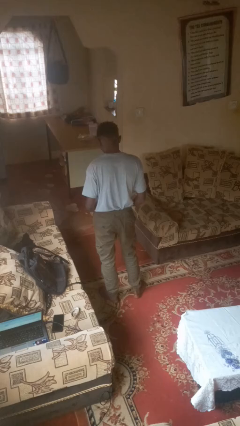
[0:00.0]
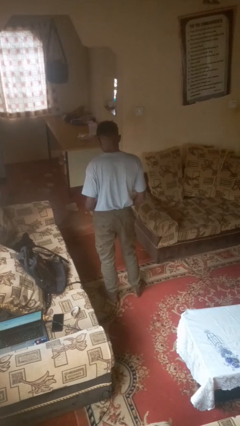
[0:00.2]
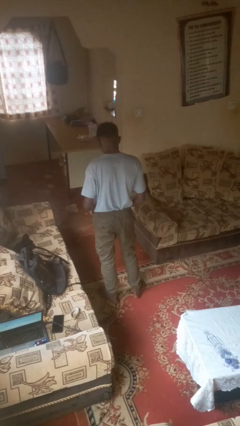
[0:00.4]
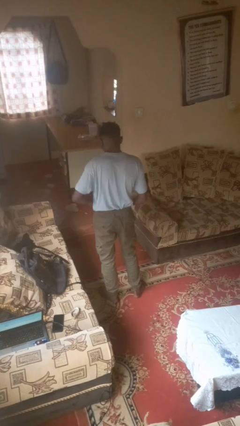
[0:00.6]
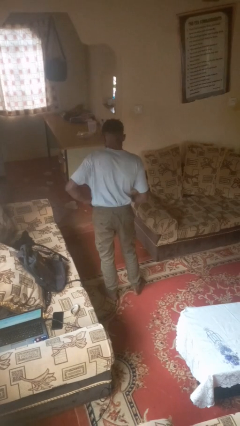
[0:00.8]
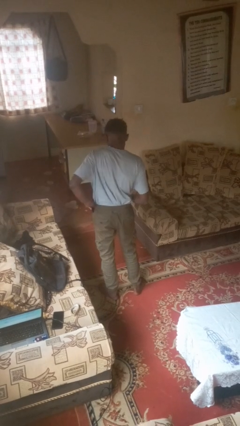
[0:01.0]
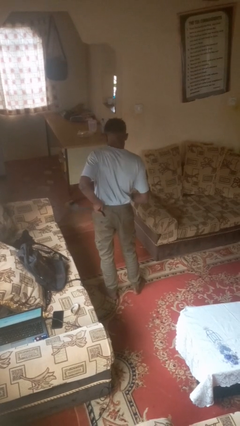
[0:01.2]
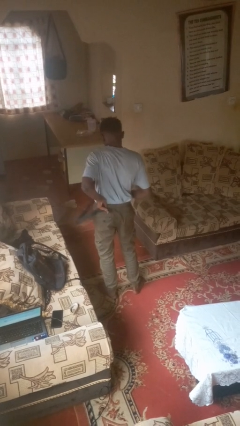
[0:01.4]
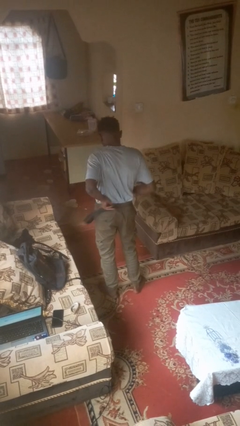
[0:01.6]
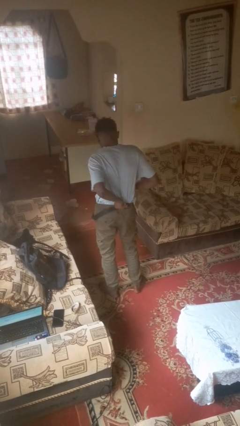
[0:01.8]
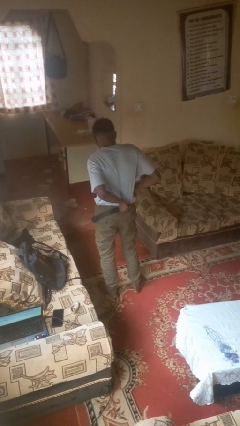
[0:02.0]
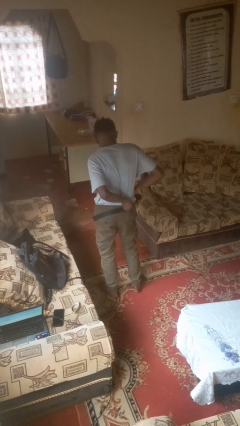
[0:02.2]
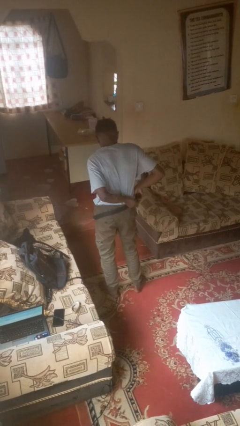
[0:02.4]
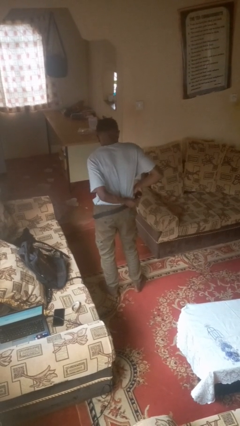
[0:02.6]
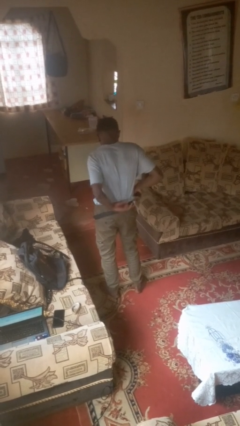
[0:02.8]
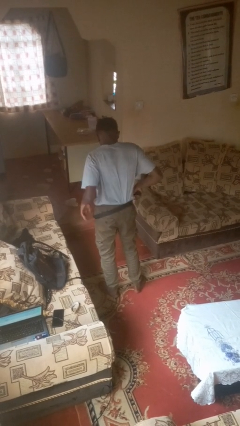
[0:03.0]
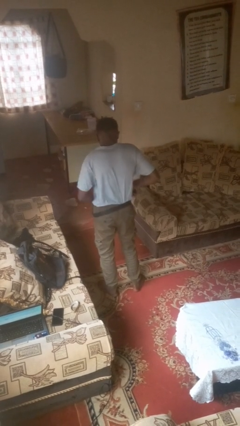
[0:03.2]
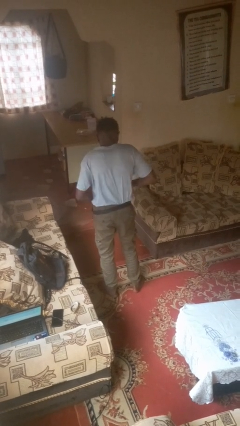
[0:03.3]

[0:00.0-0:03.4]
person puts on belt

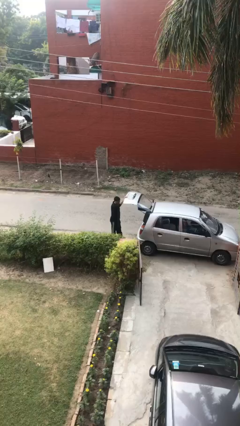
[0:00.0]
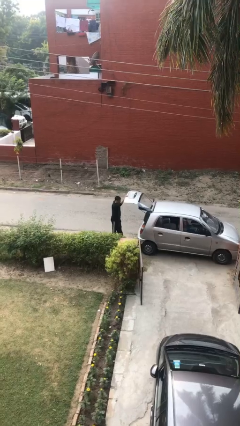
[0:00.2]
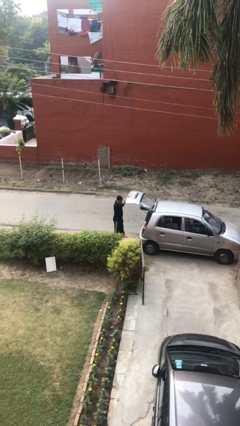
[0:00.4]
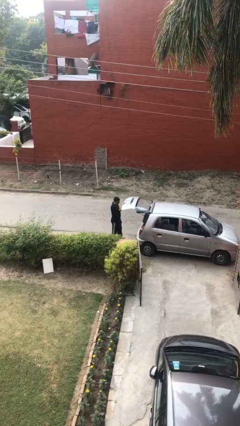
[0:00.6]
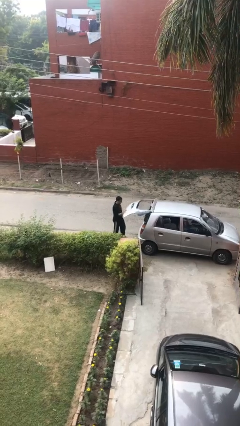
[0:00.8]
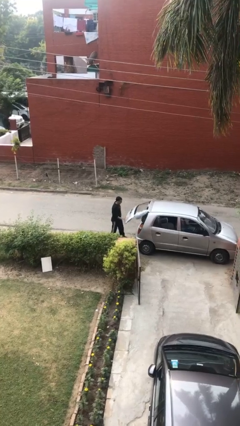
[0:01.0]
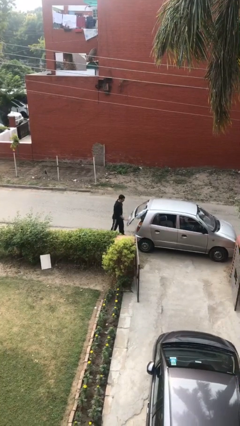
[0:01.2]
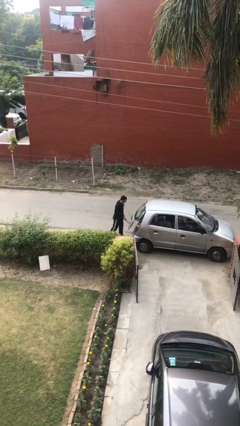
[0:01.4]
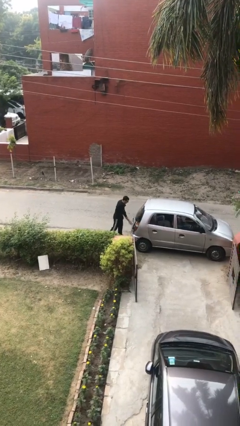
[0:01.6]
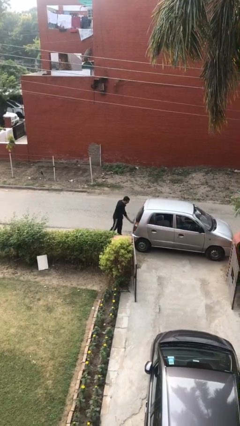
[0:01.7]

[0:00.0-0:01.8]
person closes car trunk

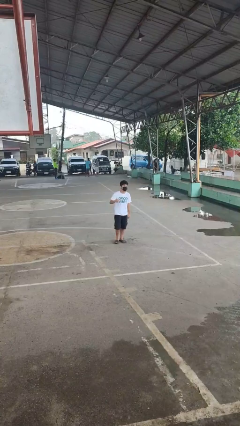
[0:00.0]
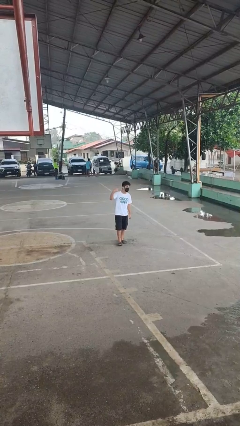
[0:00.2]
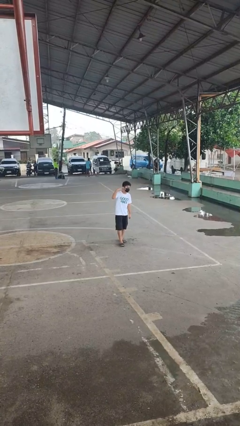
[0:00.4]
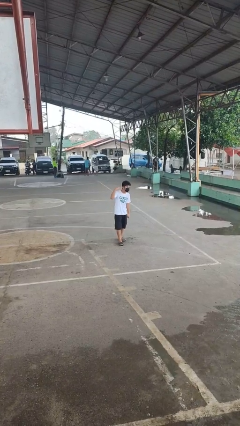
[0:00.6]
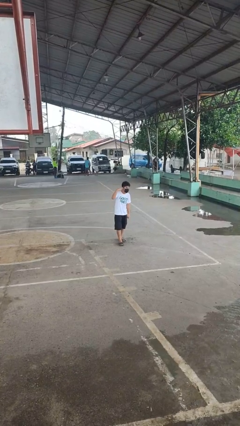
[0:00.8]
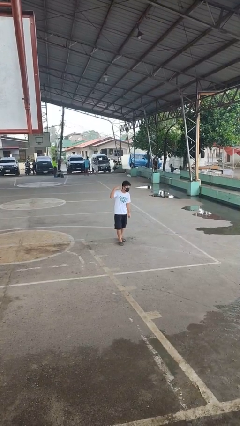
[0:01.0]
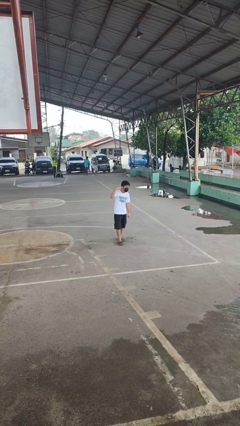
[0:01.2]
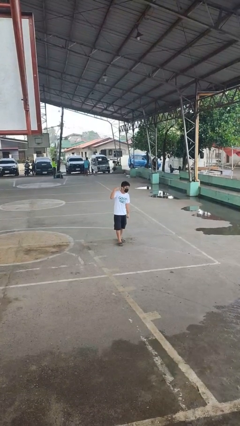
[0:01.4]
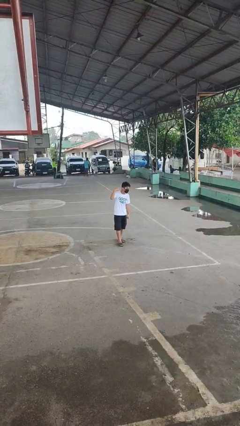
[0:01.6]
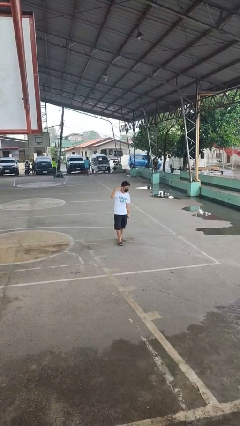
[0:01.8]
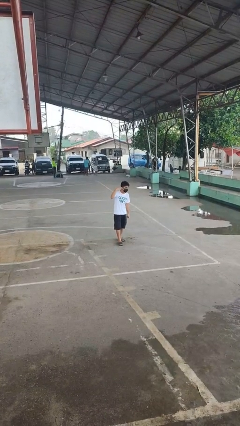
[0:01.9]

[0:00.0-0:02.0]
person gestures listen closely

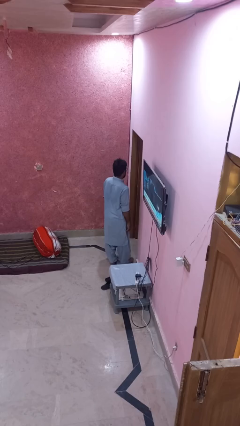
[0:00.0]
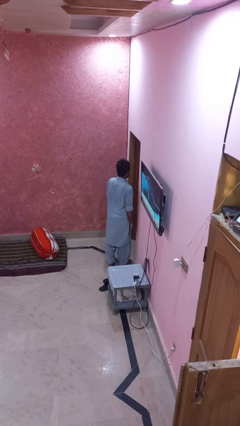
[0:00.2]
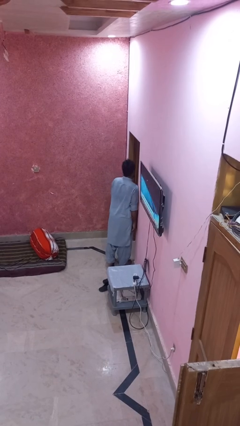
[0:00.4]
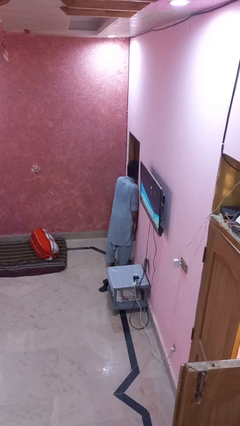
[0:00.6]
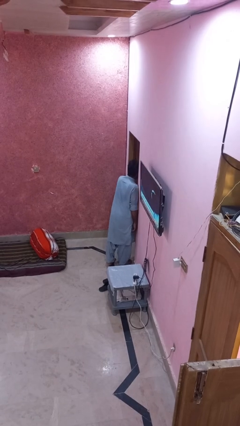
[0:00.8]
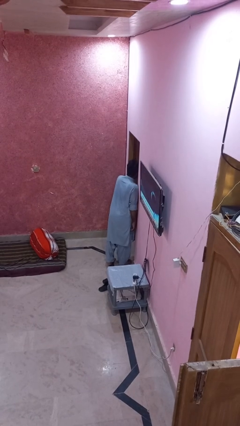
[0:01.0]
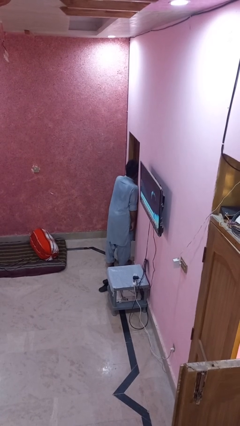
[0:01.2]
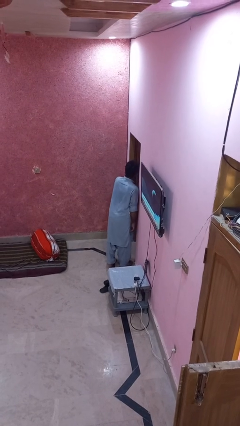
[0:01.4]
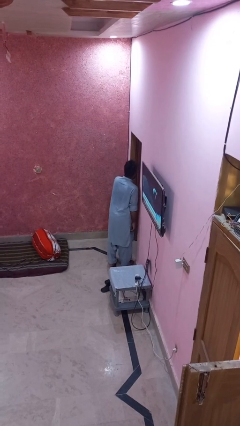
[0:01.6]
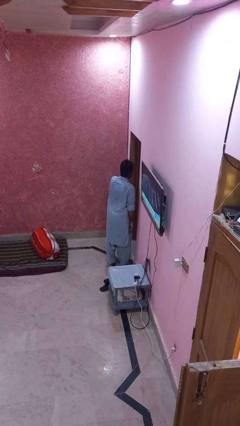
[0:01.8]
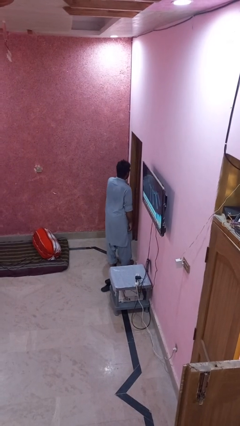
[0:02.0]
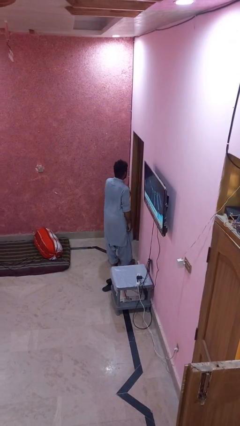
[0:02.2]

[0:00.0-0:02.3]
person bumps into wall

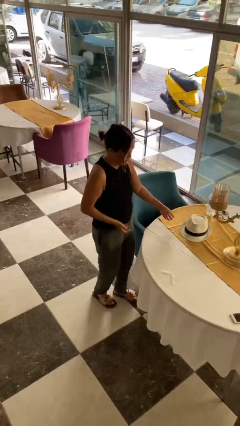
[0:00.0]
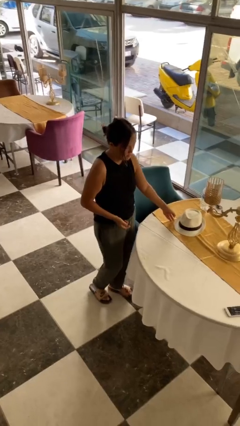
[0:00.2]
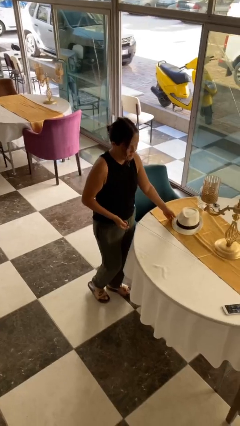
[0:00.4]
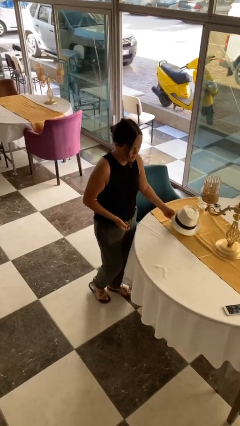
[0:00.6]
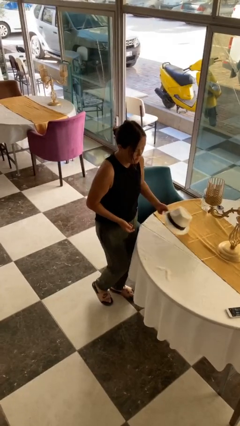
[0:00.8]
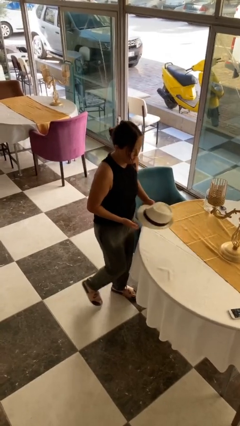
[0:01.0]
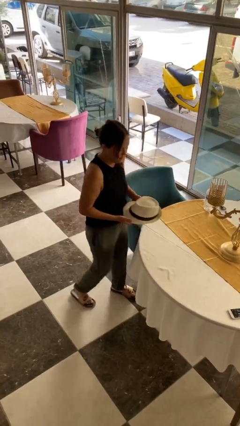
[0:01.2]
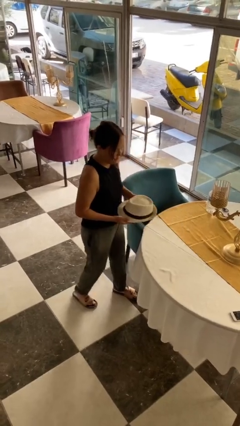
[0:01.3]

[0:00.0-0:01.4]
person picks up object from table

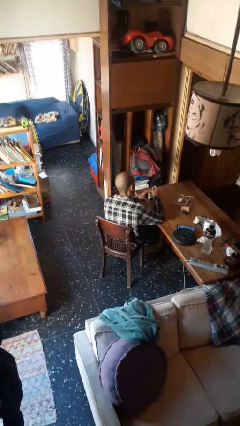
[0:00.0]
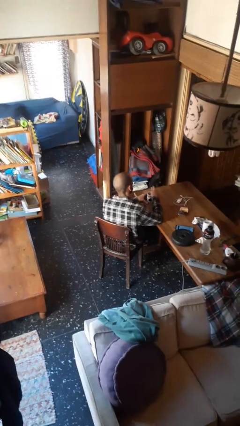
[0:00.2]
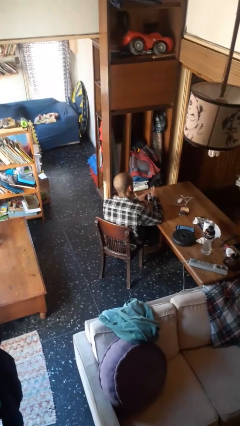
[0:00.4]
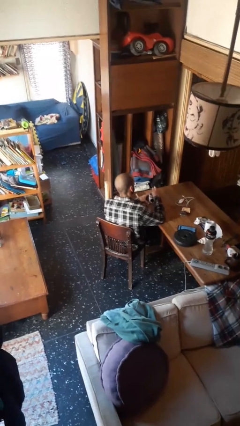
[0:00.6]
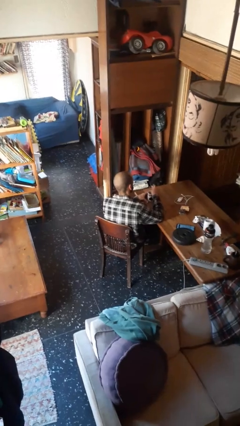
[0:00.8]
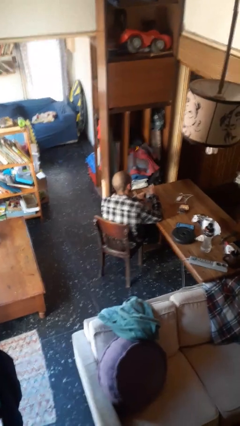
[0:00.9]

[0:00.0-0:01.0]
person stirs mug

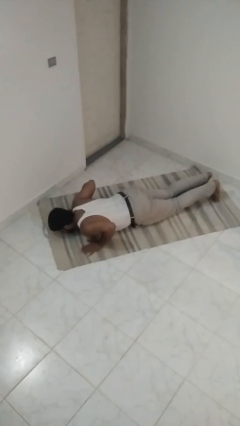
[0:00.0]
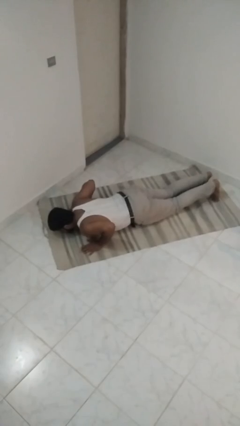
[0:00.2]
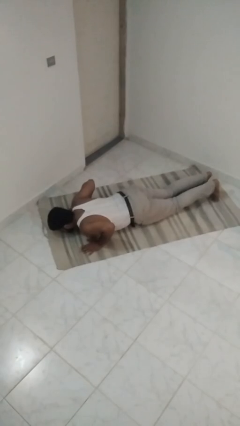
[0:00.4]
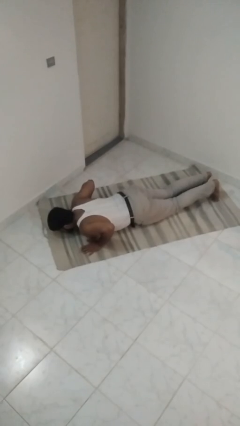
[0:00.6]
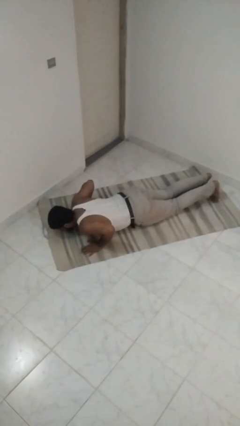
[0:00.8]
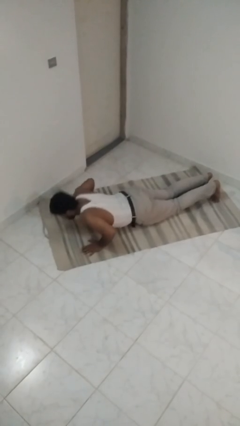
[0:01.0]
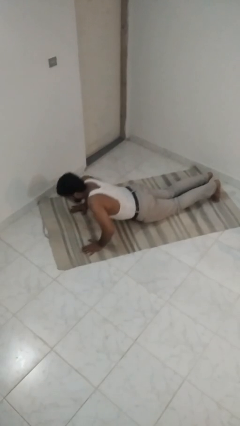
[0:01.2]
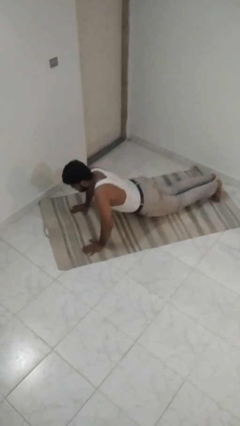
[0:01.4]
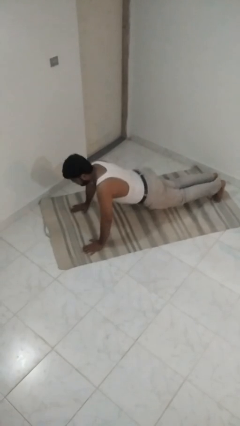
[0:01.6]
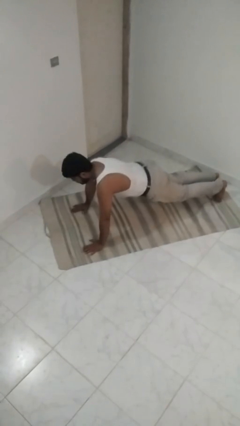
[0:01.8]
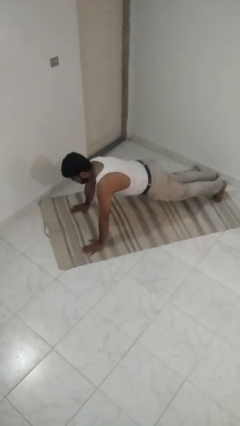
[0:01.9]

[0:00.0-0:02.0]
person exercises with pushup

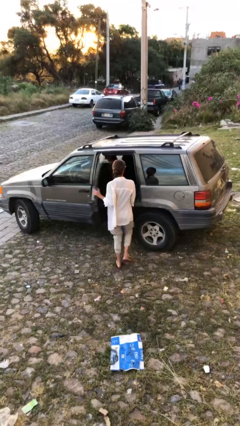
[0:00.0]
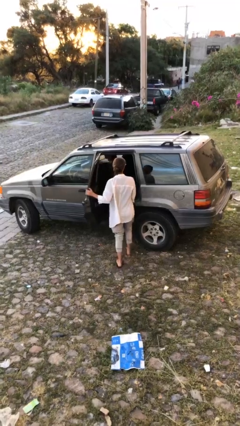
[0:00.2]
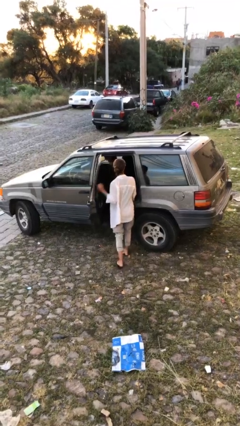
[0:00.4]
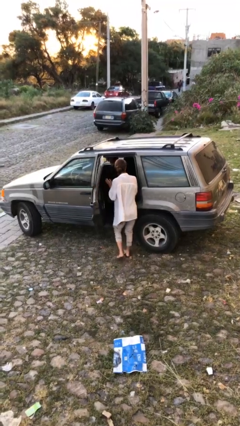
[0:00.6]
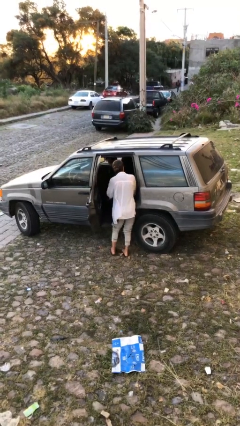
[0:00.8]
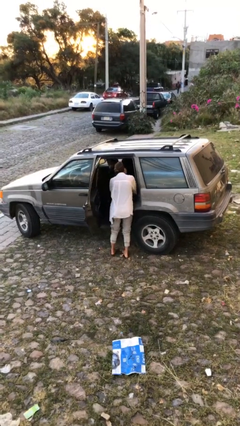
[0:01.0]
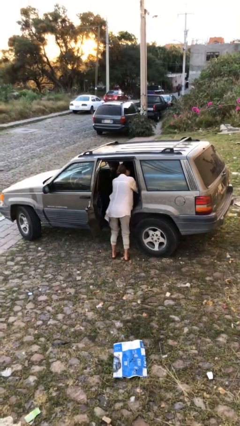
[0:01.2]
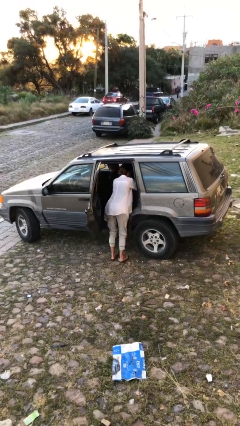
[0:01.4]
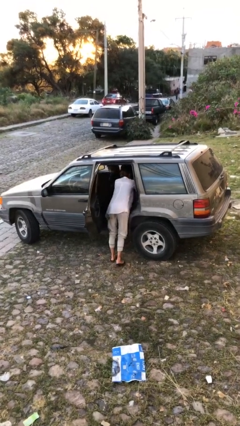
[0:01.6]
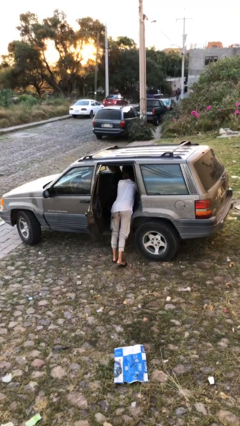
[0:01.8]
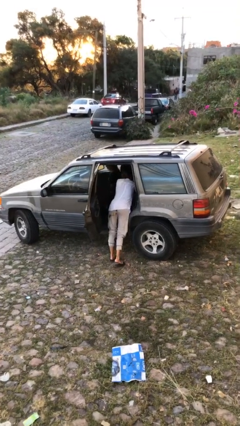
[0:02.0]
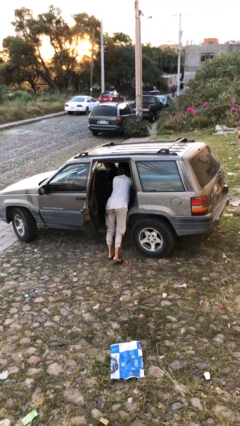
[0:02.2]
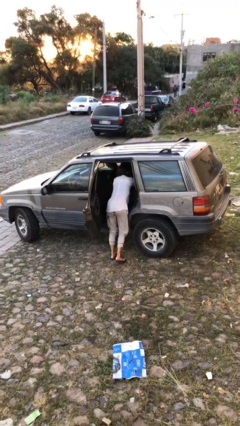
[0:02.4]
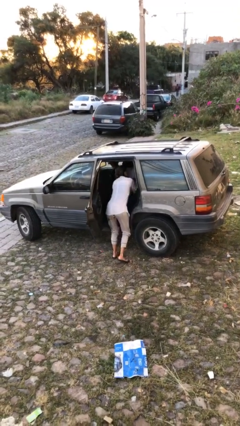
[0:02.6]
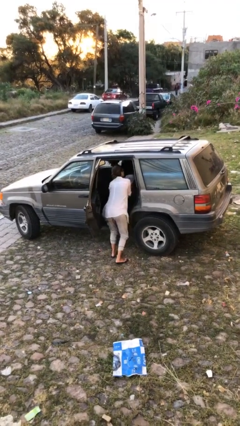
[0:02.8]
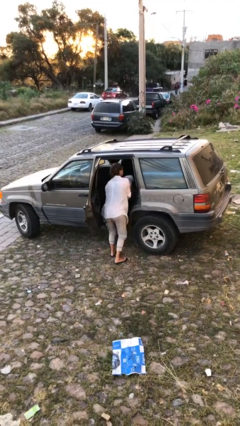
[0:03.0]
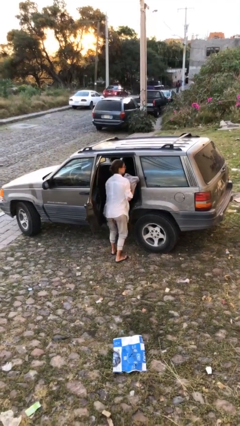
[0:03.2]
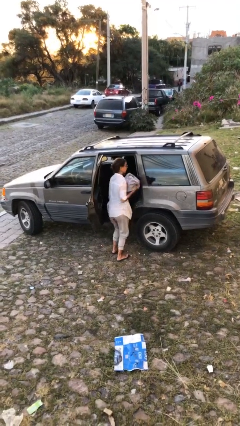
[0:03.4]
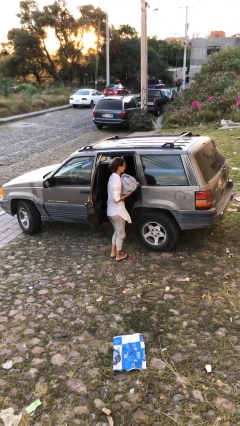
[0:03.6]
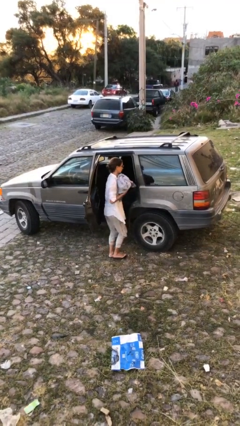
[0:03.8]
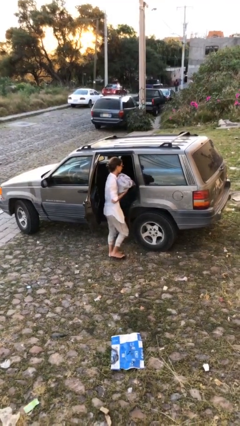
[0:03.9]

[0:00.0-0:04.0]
person unloads car
